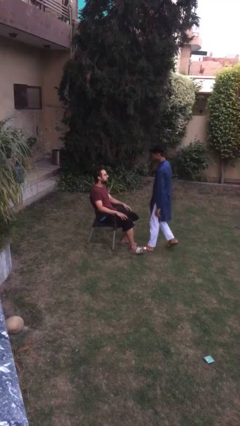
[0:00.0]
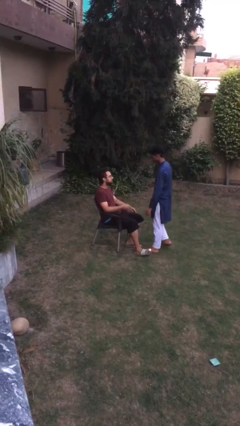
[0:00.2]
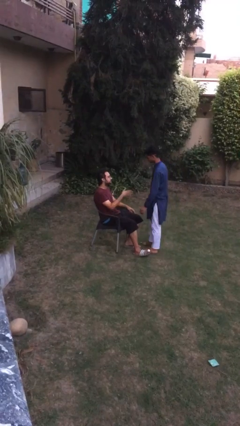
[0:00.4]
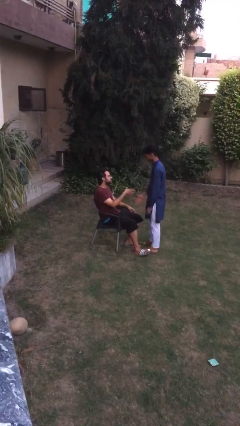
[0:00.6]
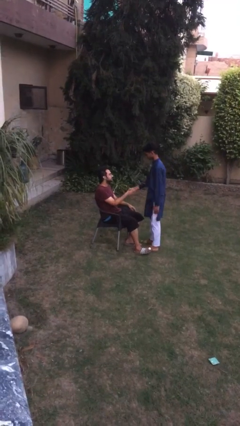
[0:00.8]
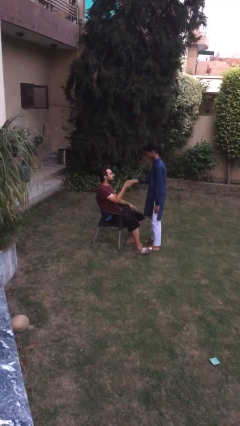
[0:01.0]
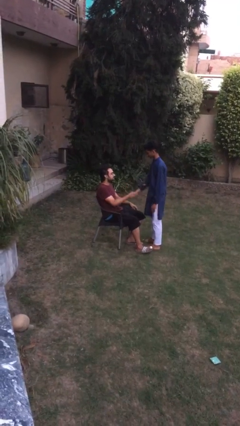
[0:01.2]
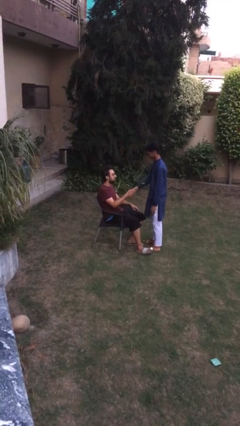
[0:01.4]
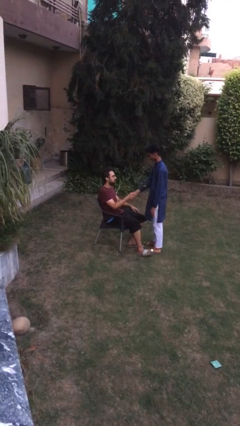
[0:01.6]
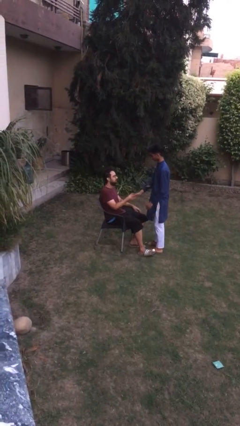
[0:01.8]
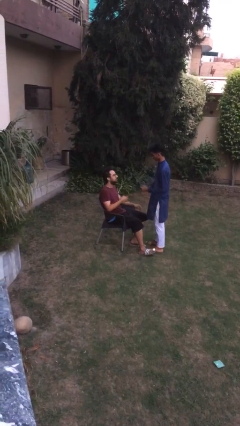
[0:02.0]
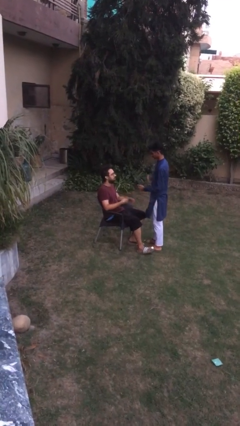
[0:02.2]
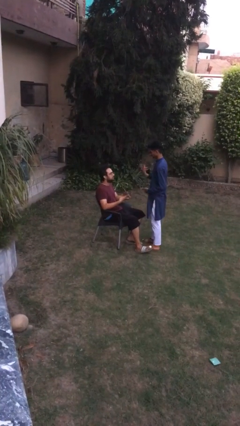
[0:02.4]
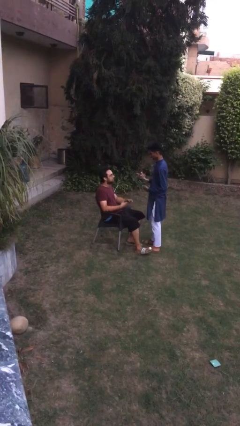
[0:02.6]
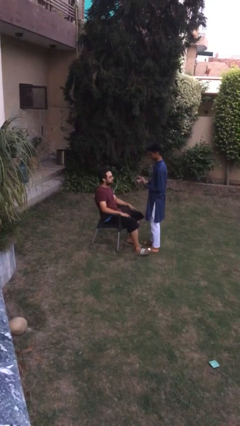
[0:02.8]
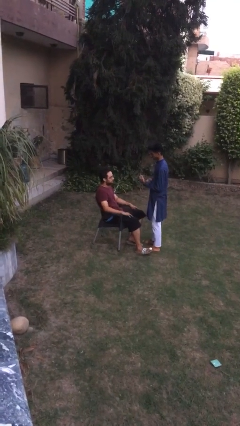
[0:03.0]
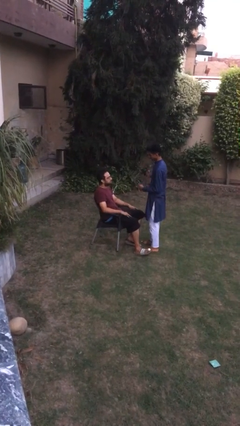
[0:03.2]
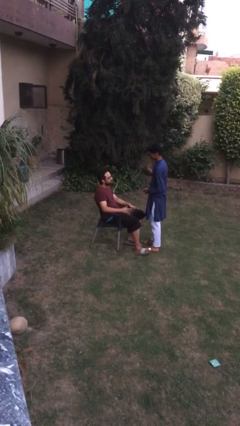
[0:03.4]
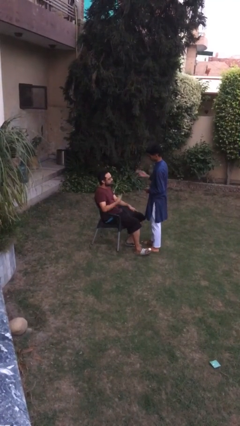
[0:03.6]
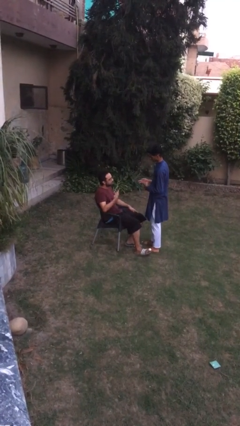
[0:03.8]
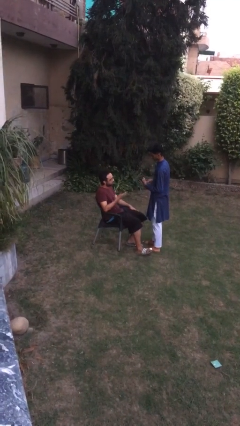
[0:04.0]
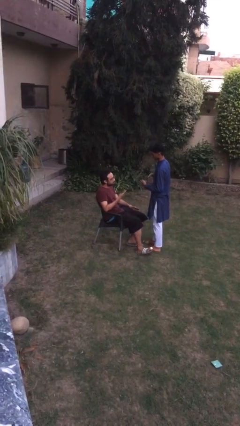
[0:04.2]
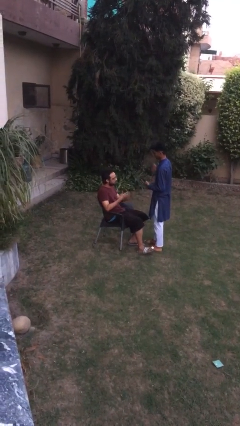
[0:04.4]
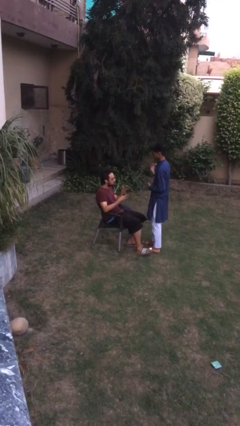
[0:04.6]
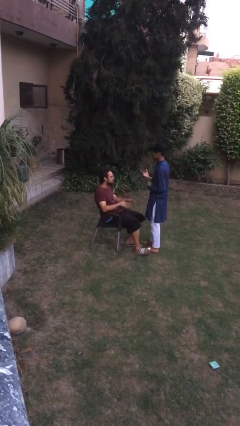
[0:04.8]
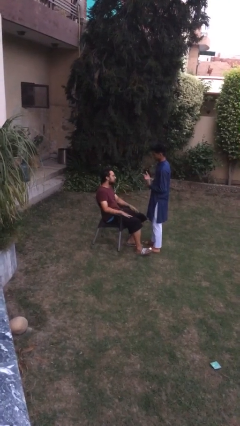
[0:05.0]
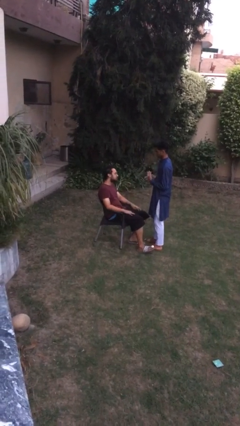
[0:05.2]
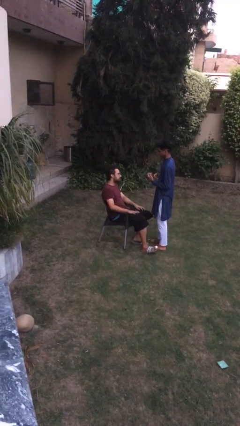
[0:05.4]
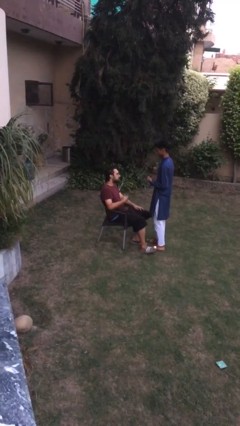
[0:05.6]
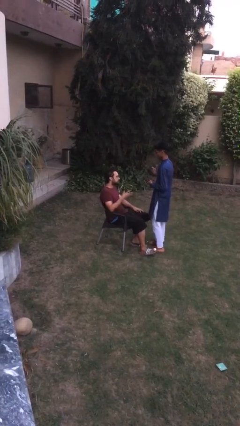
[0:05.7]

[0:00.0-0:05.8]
person shakes hand

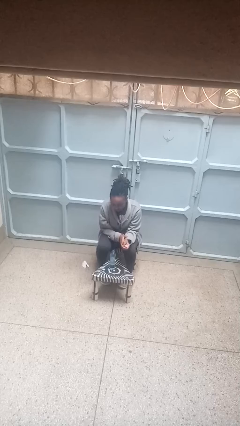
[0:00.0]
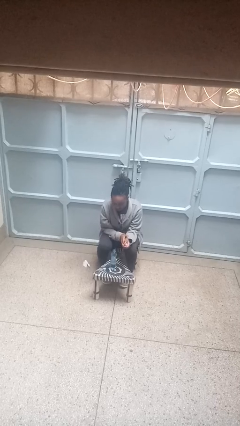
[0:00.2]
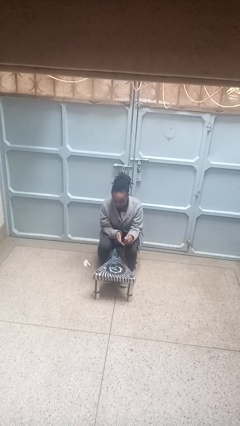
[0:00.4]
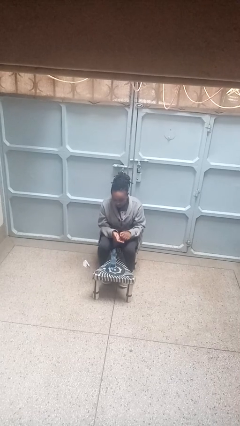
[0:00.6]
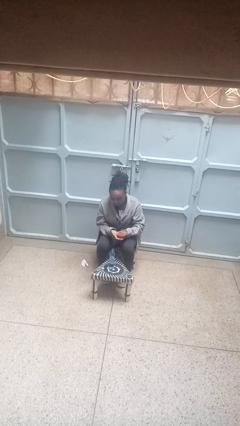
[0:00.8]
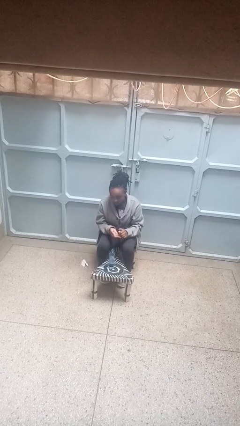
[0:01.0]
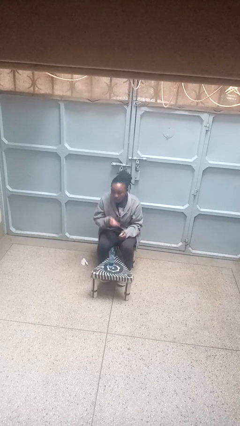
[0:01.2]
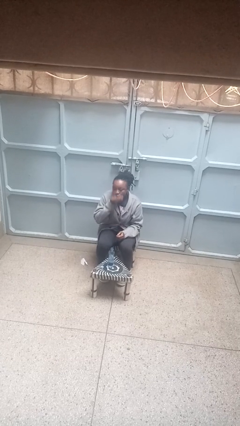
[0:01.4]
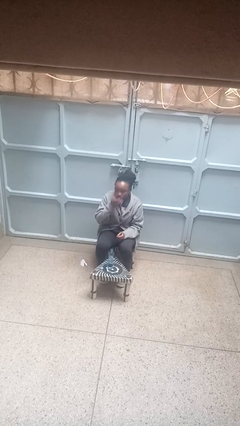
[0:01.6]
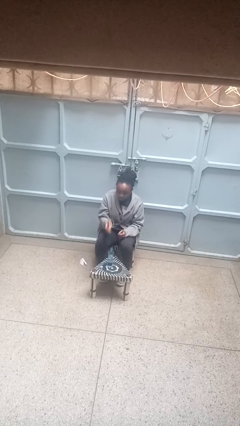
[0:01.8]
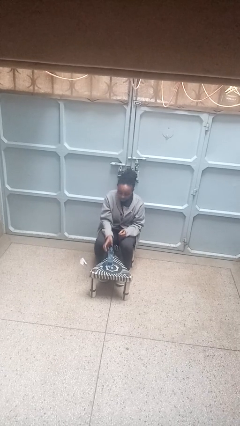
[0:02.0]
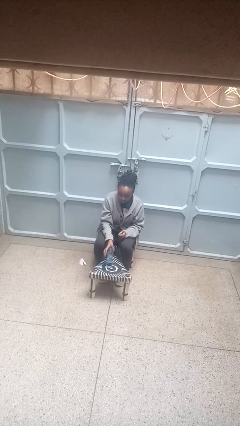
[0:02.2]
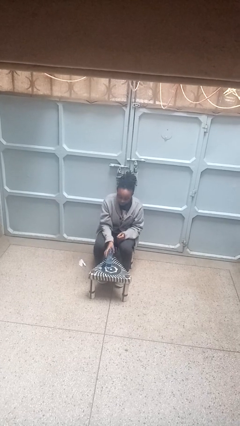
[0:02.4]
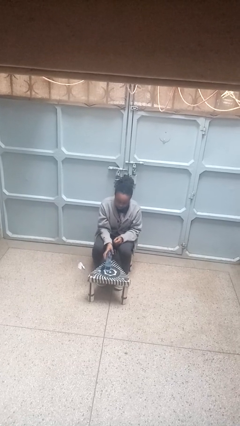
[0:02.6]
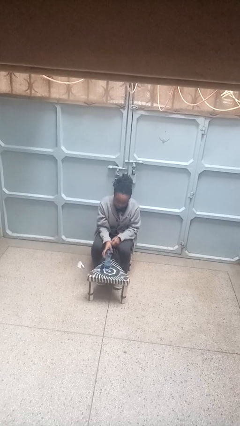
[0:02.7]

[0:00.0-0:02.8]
person takes medicine pills

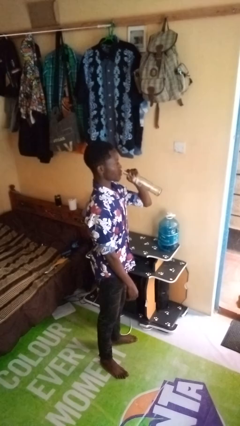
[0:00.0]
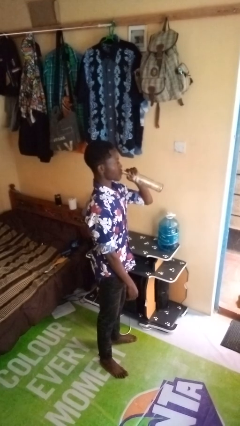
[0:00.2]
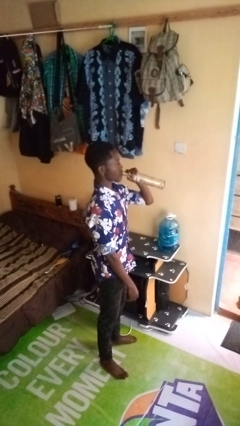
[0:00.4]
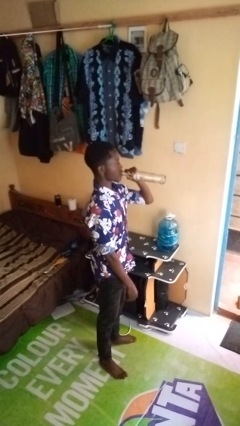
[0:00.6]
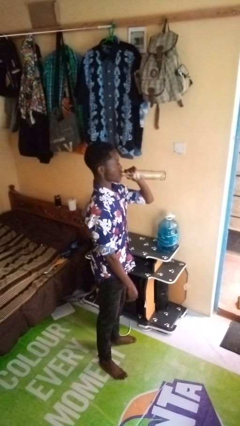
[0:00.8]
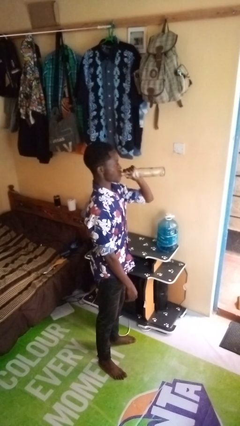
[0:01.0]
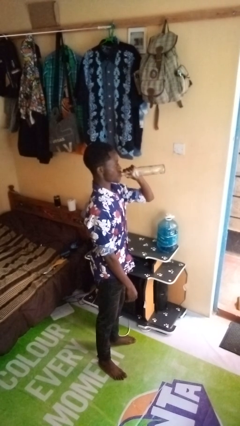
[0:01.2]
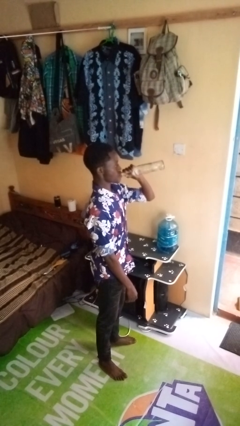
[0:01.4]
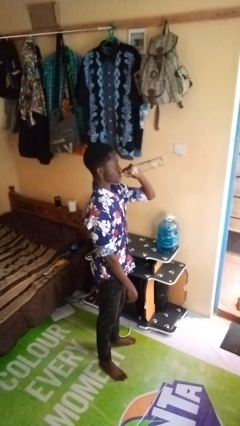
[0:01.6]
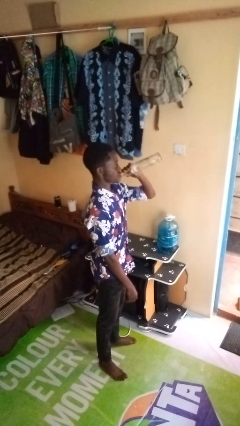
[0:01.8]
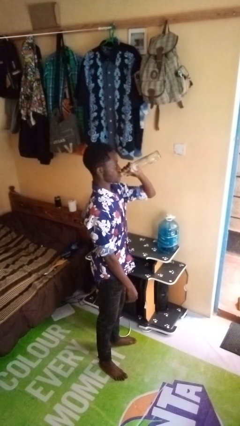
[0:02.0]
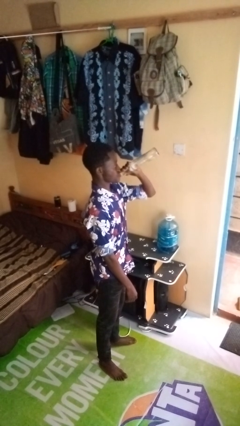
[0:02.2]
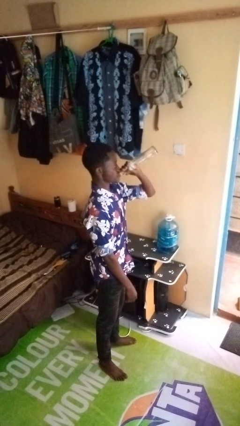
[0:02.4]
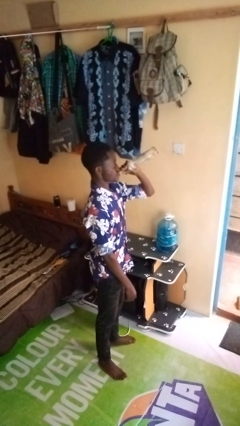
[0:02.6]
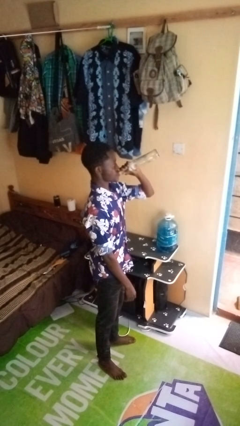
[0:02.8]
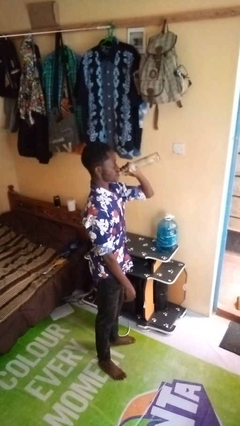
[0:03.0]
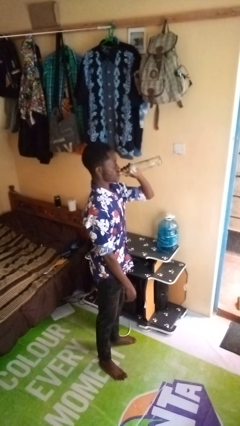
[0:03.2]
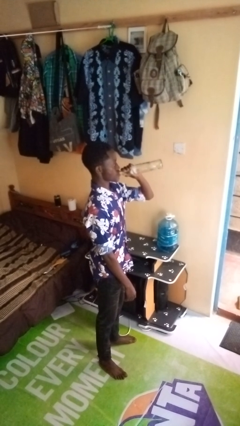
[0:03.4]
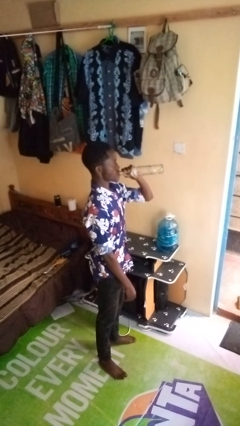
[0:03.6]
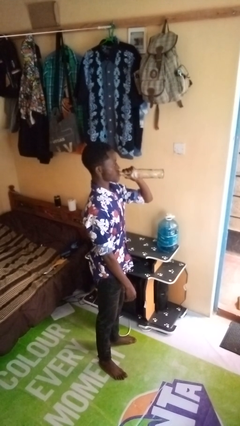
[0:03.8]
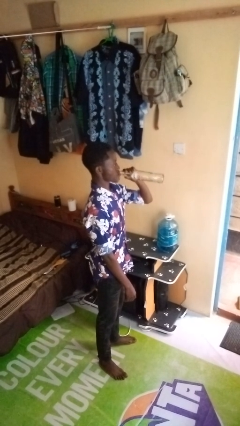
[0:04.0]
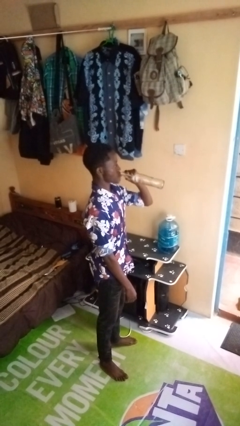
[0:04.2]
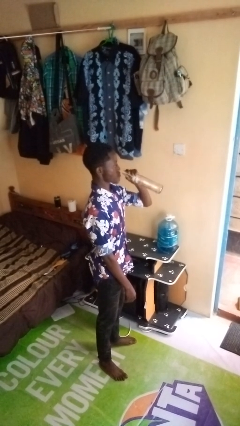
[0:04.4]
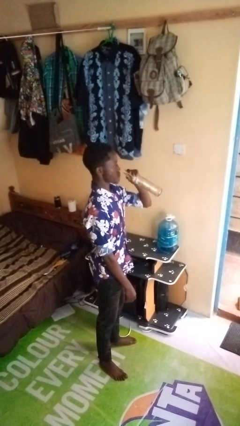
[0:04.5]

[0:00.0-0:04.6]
person drinks from bottle

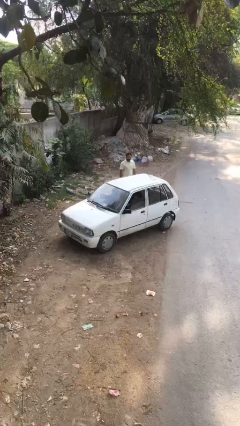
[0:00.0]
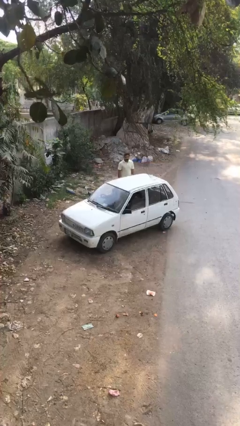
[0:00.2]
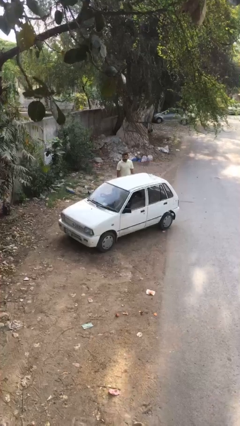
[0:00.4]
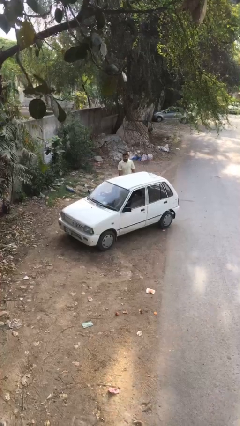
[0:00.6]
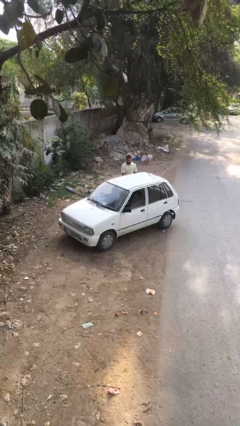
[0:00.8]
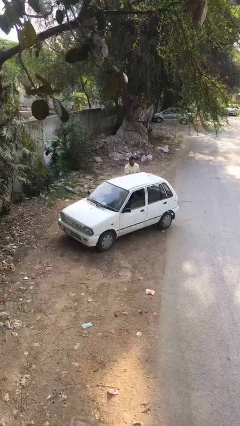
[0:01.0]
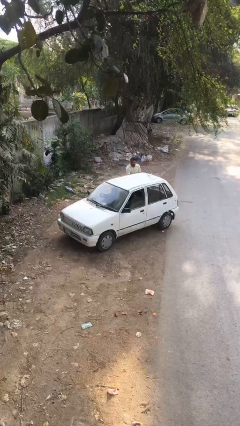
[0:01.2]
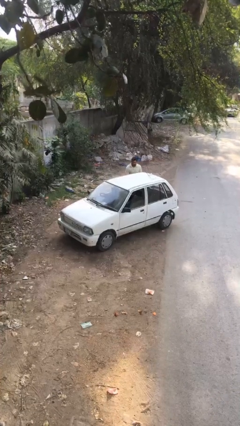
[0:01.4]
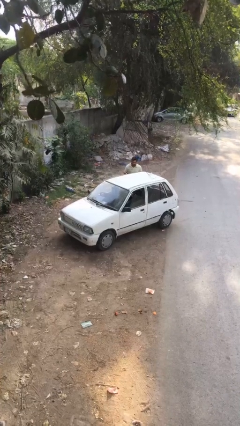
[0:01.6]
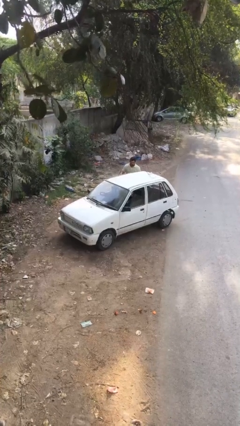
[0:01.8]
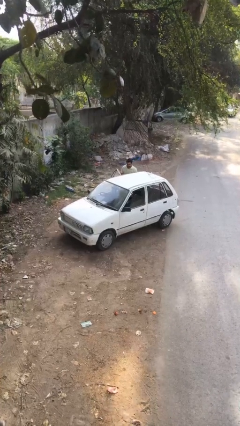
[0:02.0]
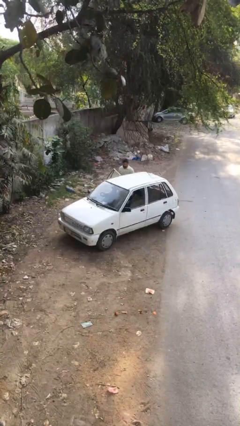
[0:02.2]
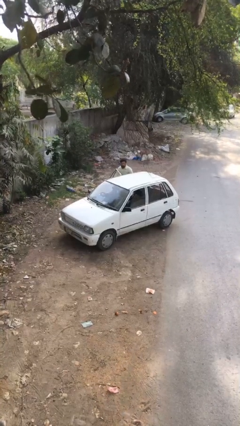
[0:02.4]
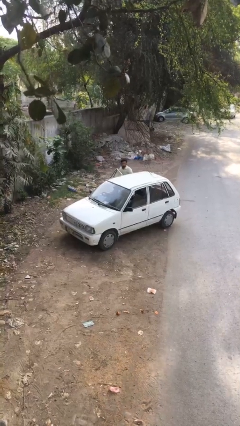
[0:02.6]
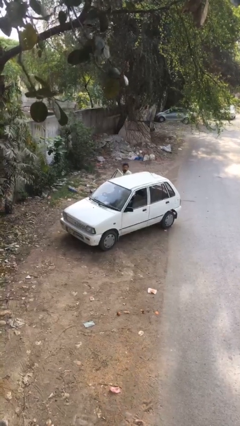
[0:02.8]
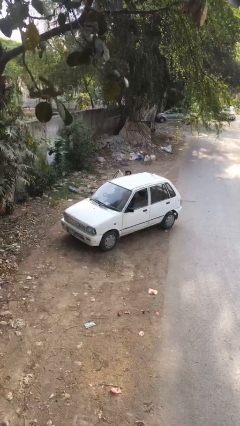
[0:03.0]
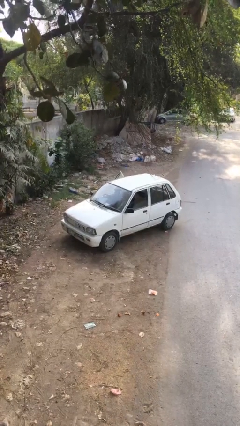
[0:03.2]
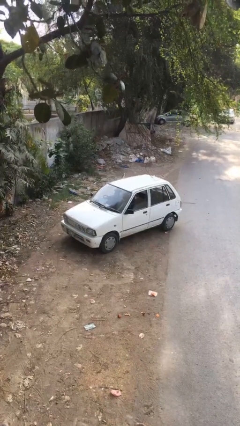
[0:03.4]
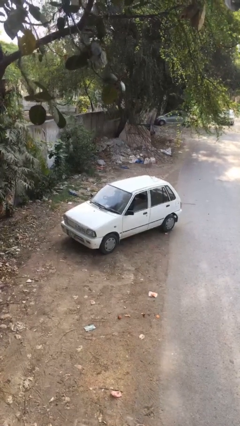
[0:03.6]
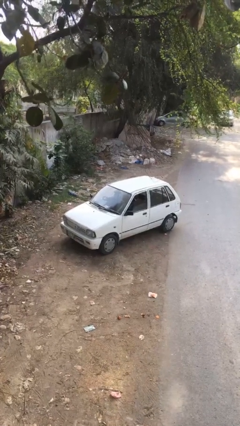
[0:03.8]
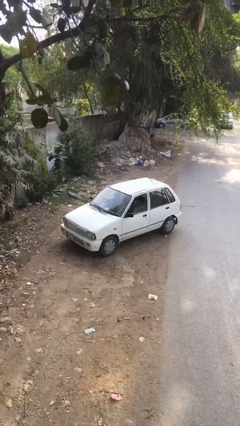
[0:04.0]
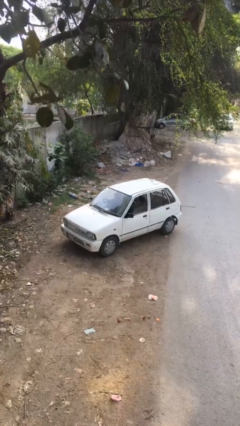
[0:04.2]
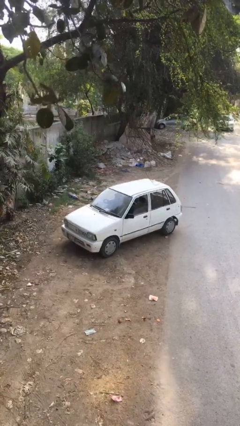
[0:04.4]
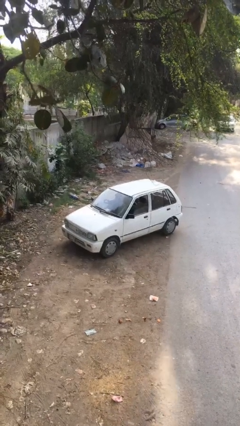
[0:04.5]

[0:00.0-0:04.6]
car picks up person

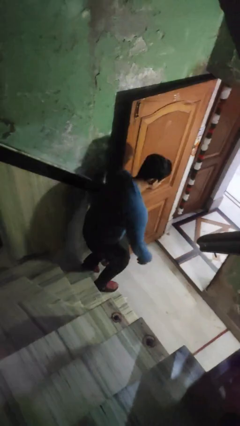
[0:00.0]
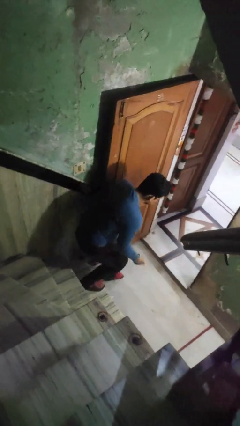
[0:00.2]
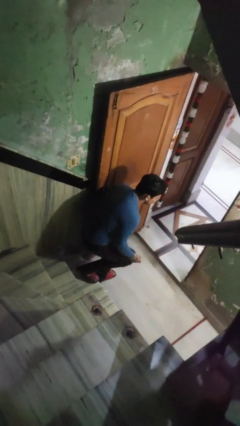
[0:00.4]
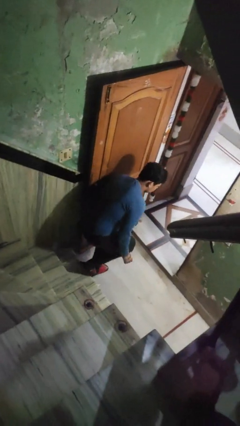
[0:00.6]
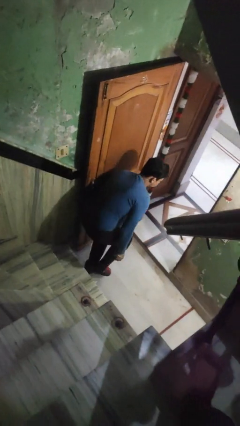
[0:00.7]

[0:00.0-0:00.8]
person trips on stair
